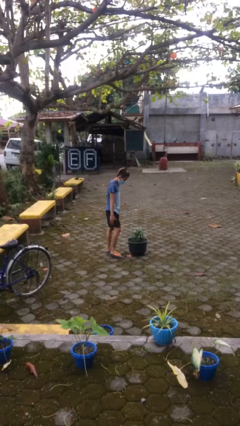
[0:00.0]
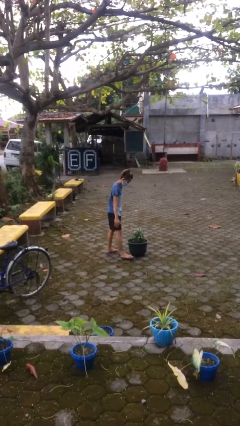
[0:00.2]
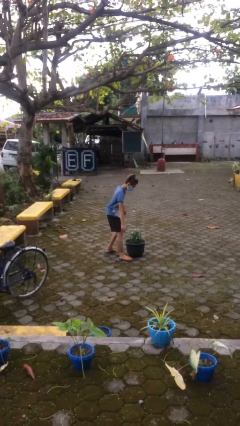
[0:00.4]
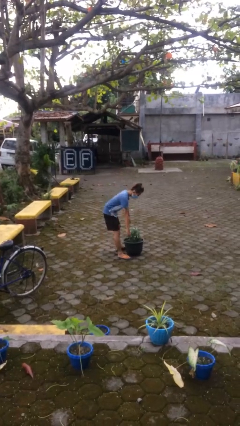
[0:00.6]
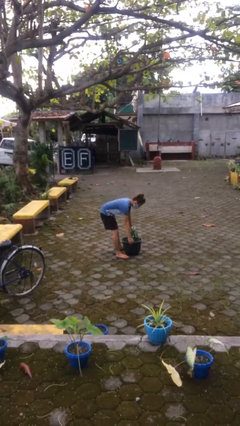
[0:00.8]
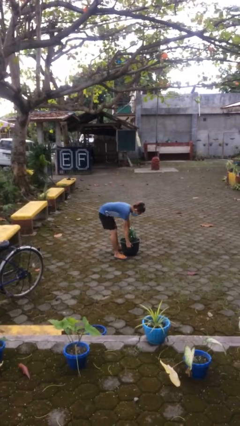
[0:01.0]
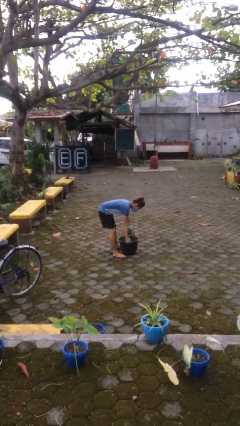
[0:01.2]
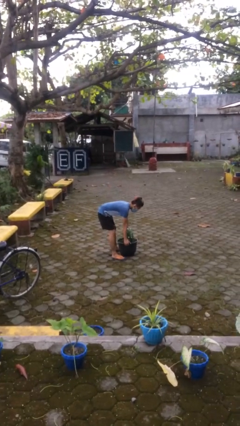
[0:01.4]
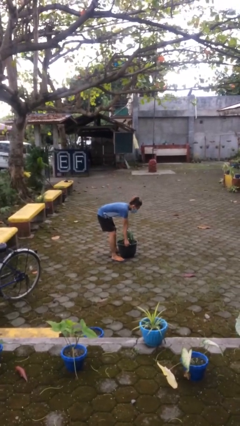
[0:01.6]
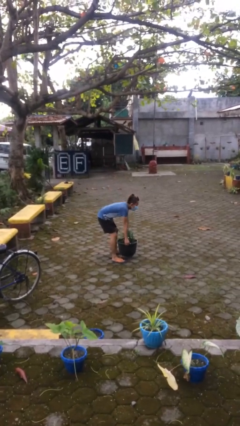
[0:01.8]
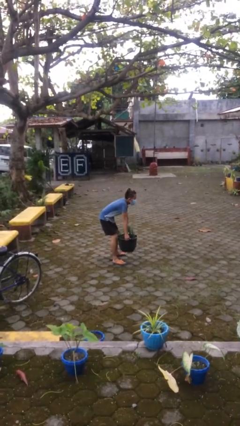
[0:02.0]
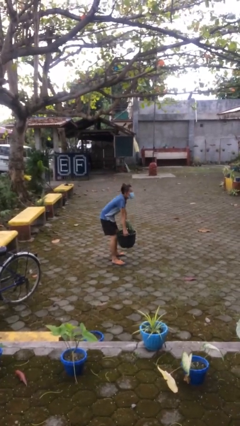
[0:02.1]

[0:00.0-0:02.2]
person picks up object from floor

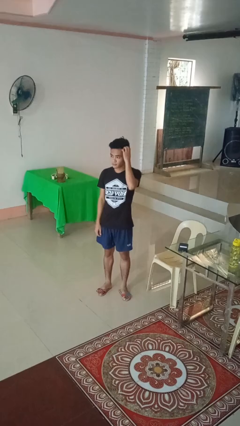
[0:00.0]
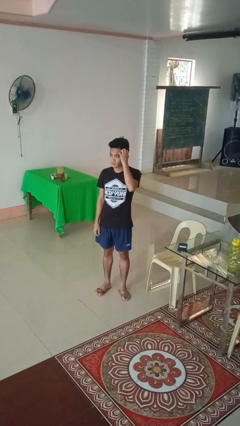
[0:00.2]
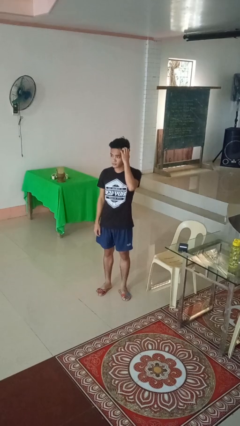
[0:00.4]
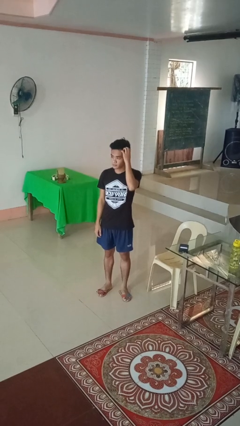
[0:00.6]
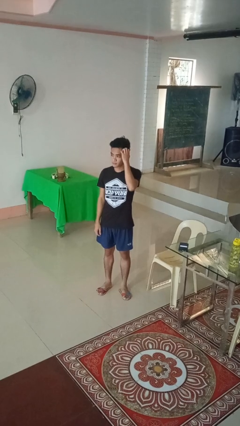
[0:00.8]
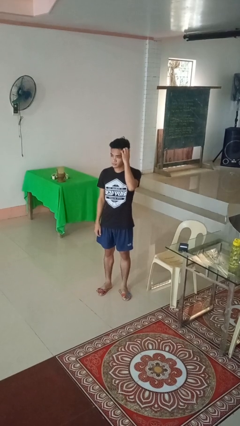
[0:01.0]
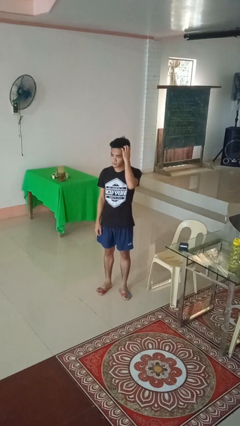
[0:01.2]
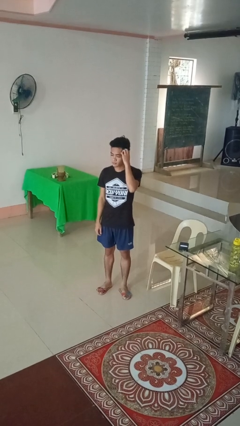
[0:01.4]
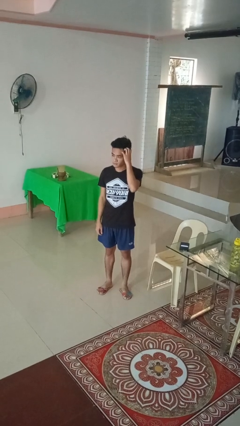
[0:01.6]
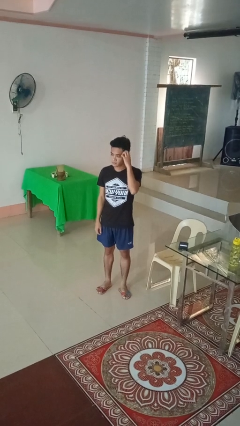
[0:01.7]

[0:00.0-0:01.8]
person scratches face

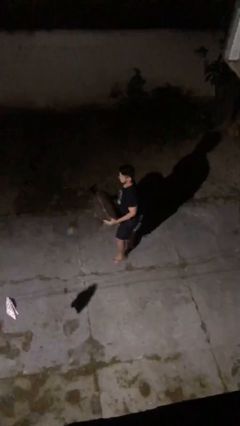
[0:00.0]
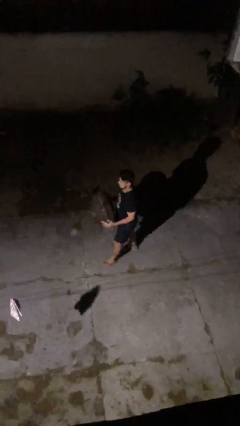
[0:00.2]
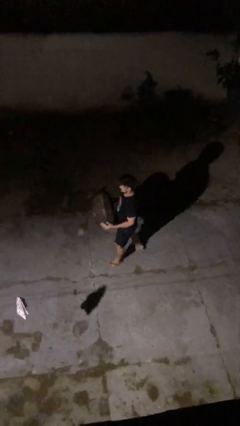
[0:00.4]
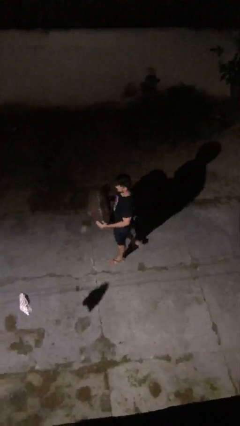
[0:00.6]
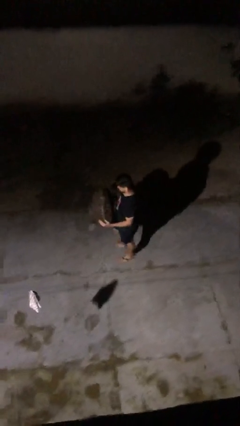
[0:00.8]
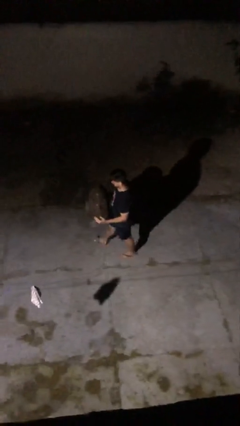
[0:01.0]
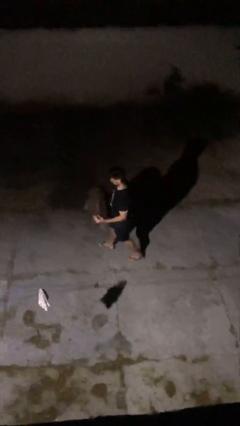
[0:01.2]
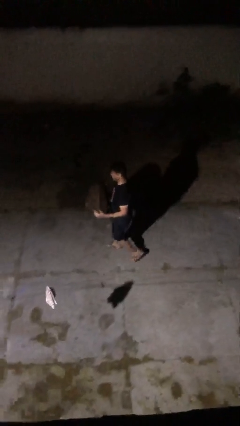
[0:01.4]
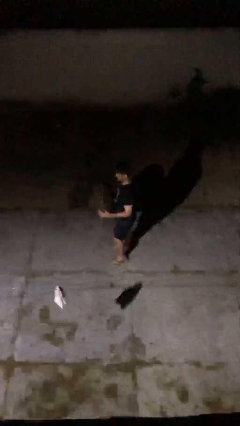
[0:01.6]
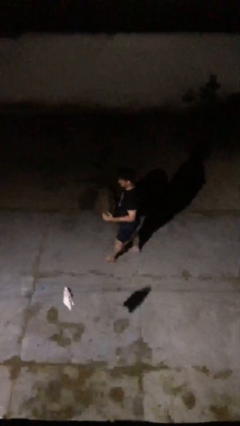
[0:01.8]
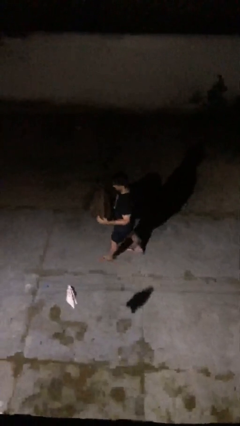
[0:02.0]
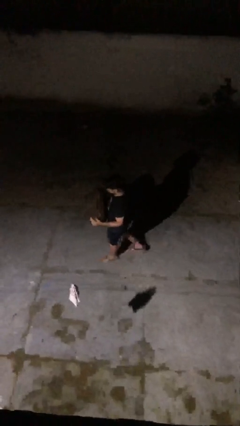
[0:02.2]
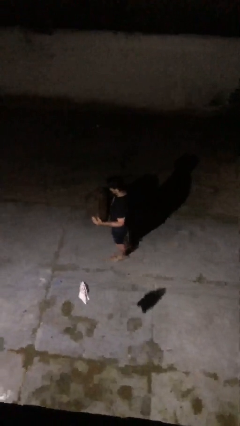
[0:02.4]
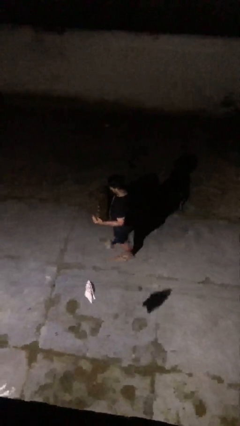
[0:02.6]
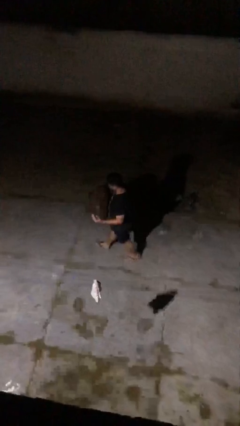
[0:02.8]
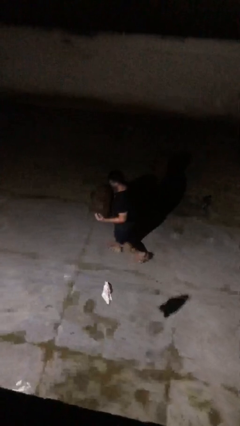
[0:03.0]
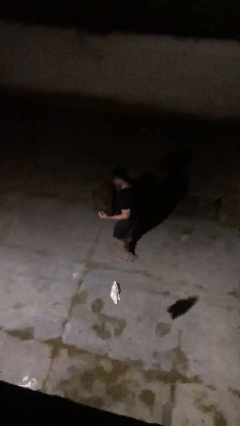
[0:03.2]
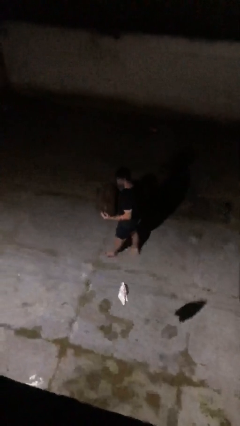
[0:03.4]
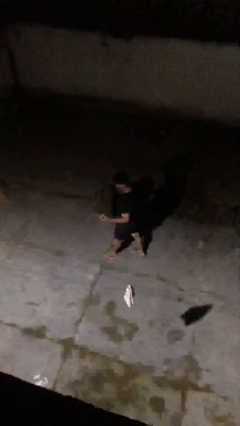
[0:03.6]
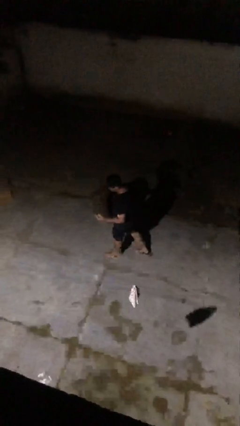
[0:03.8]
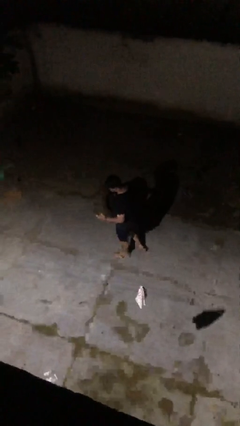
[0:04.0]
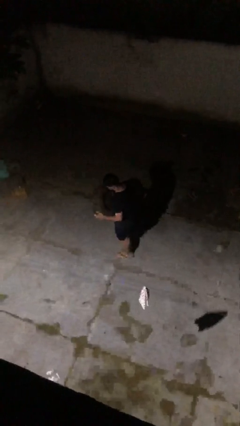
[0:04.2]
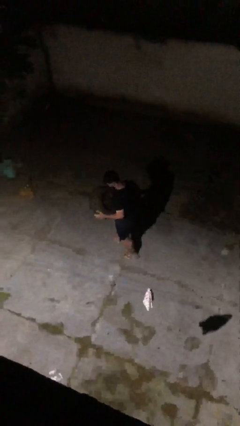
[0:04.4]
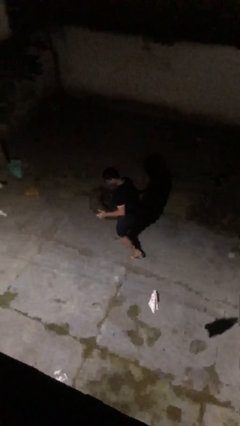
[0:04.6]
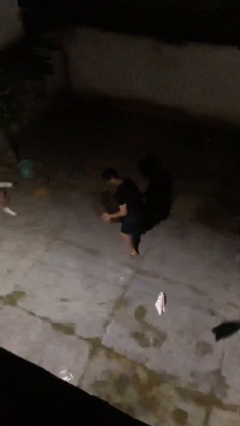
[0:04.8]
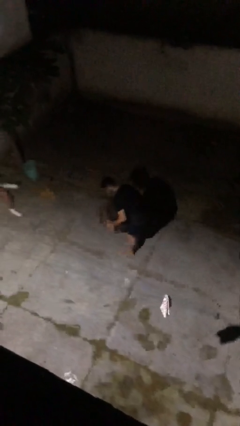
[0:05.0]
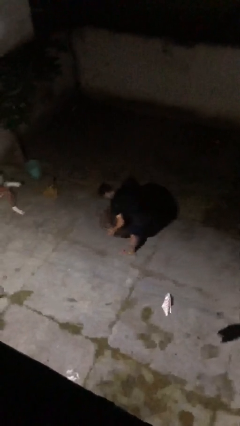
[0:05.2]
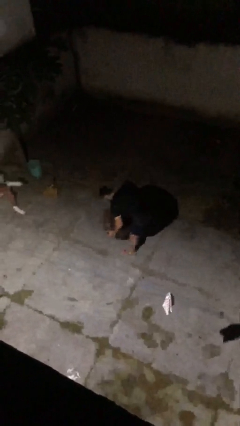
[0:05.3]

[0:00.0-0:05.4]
person carries heavy object

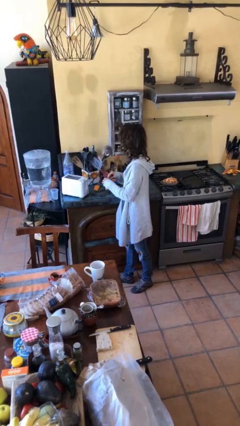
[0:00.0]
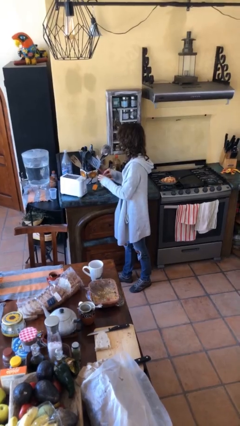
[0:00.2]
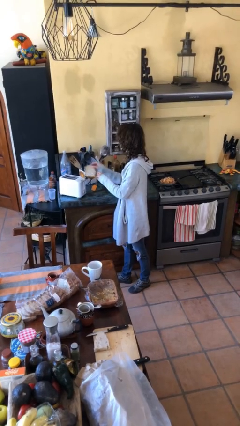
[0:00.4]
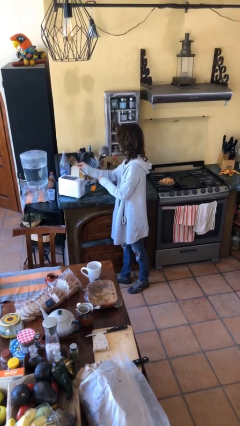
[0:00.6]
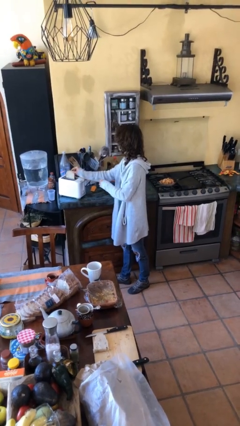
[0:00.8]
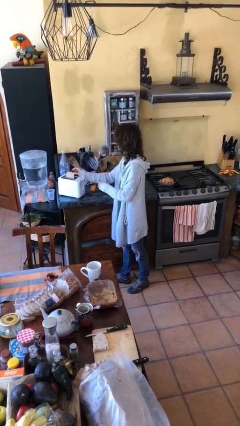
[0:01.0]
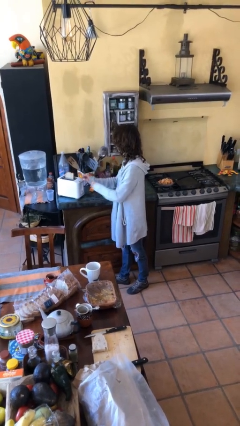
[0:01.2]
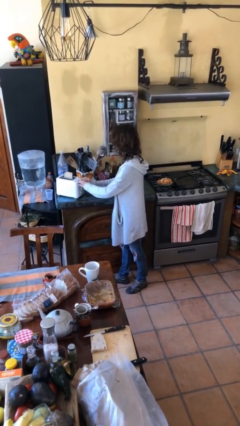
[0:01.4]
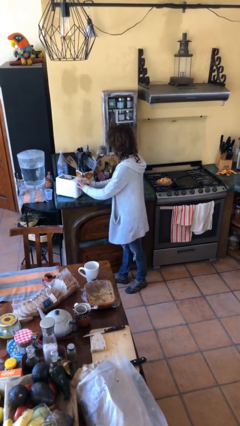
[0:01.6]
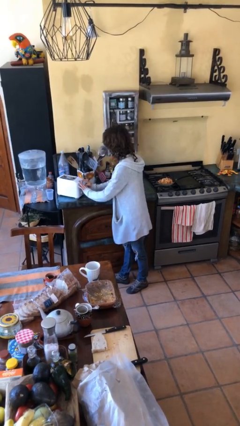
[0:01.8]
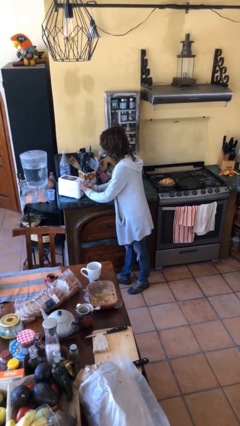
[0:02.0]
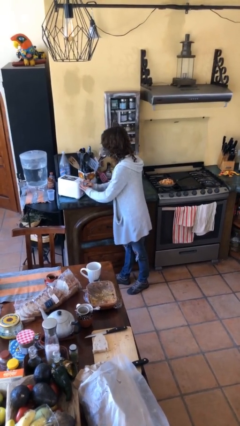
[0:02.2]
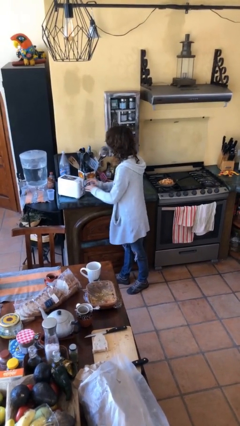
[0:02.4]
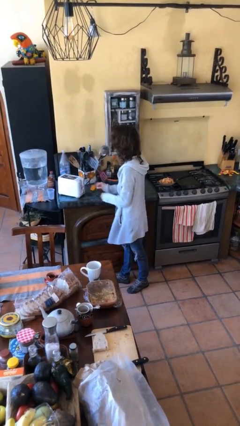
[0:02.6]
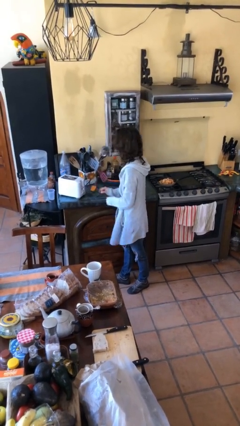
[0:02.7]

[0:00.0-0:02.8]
person puts object into toaster

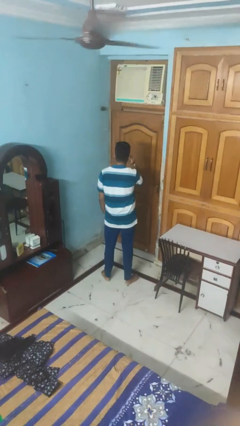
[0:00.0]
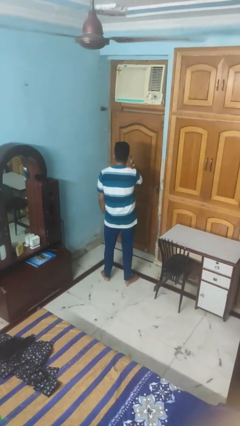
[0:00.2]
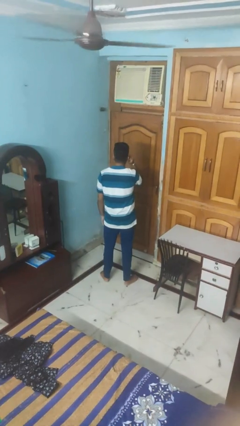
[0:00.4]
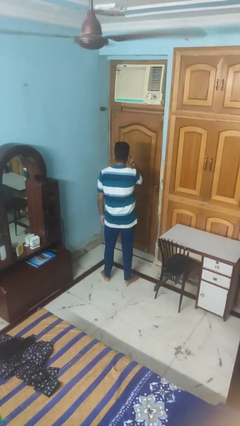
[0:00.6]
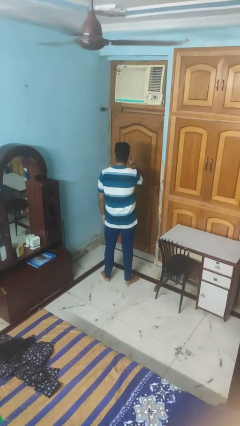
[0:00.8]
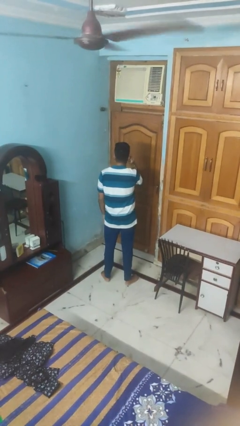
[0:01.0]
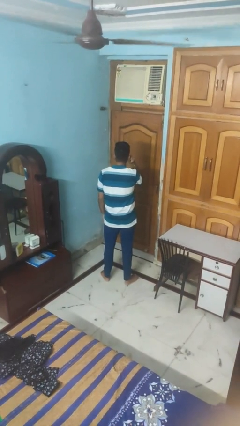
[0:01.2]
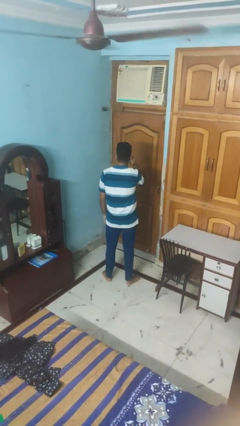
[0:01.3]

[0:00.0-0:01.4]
person touches earlobe

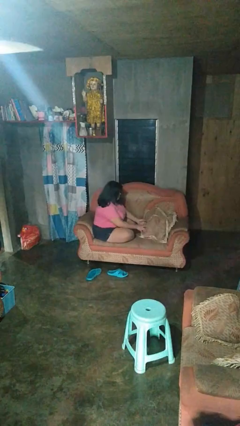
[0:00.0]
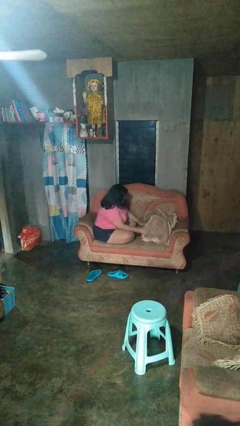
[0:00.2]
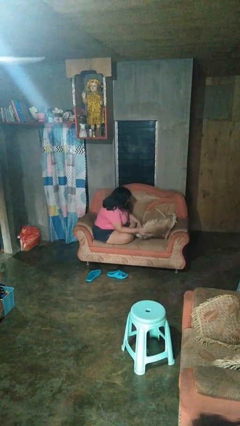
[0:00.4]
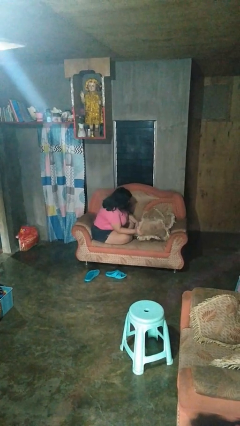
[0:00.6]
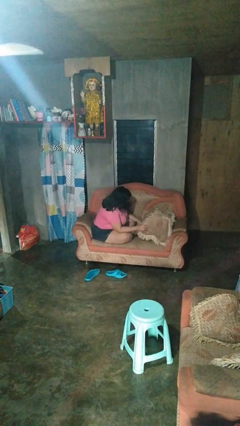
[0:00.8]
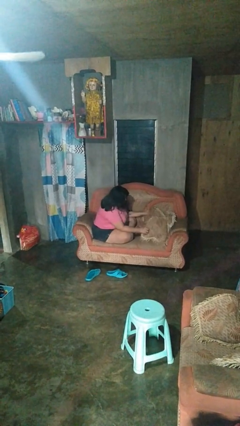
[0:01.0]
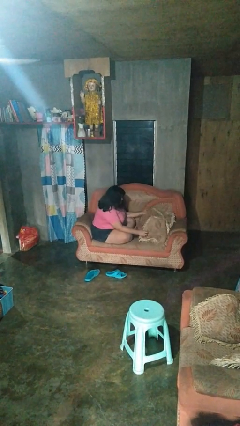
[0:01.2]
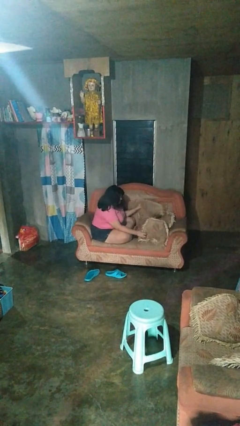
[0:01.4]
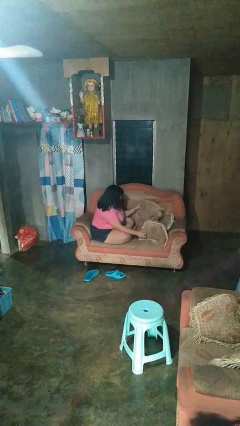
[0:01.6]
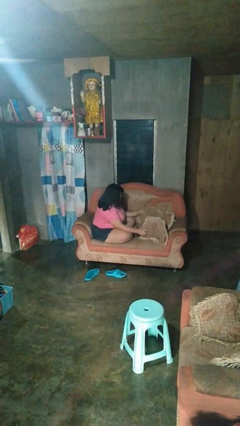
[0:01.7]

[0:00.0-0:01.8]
person searches in couch

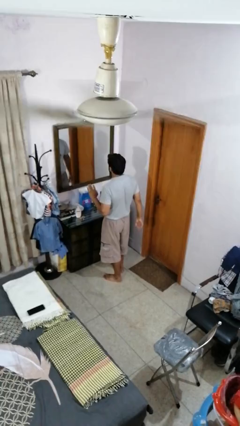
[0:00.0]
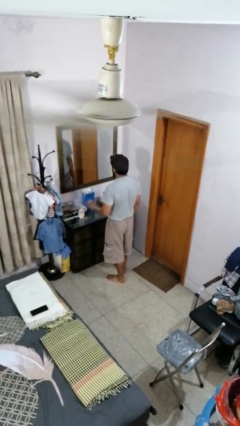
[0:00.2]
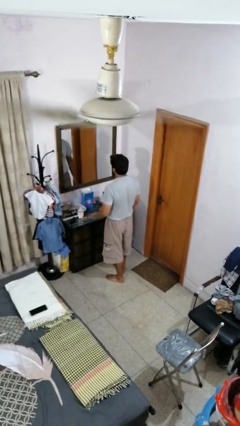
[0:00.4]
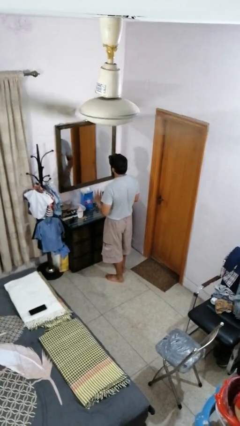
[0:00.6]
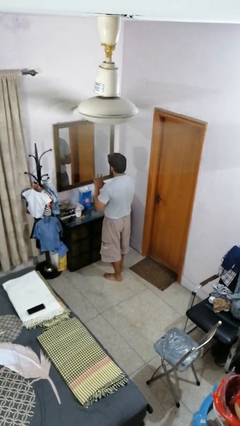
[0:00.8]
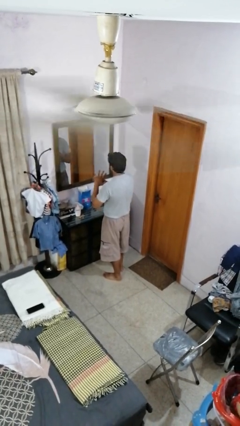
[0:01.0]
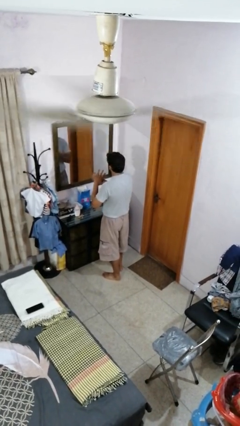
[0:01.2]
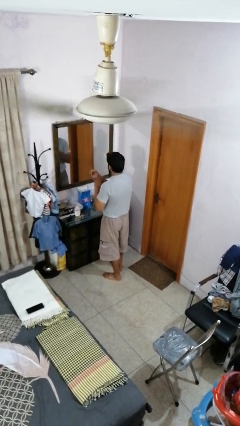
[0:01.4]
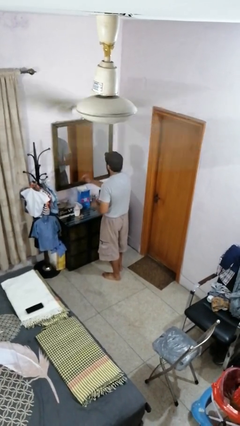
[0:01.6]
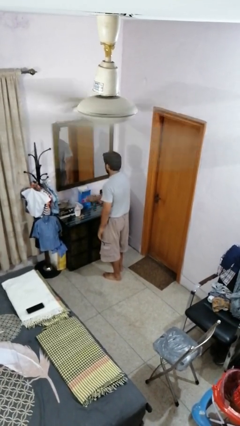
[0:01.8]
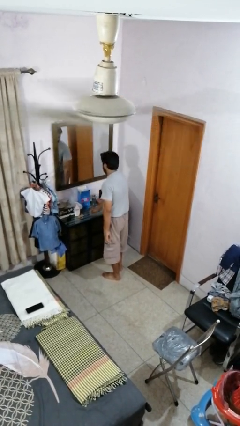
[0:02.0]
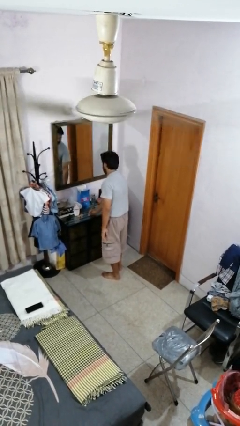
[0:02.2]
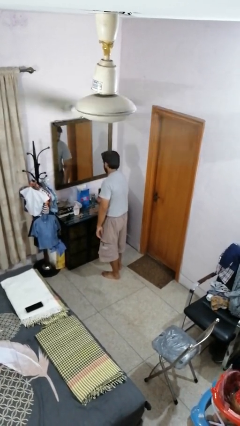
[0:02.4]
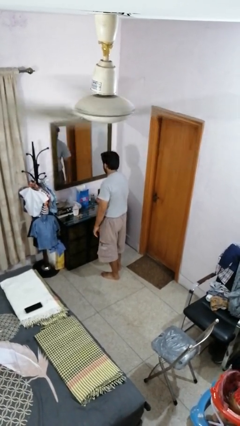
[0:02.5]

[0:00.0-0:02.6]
person takes off ring
